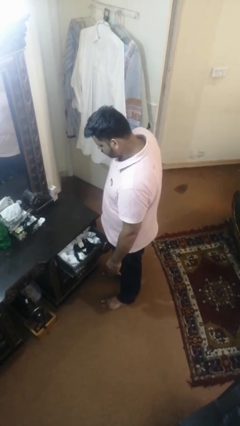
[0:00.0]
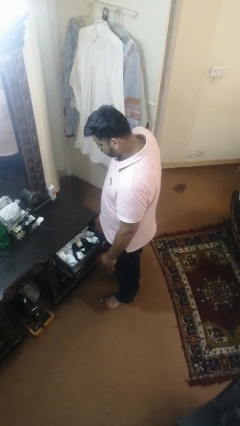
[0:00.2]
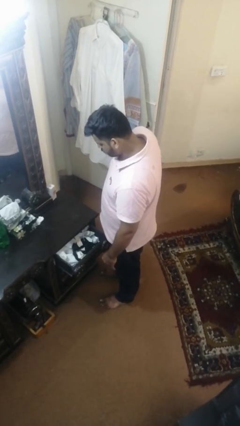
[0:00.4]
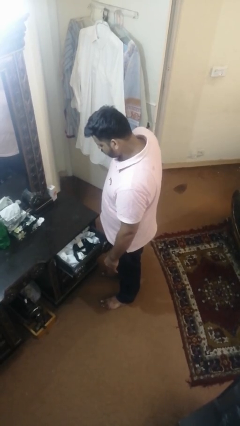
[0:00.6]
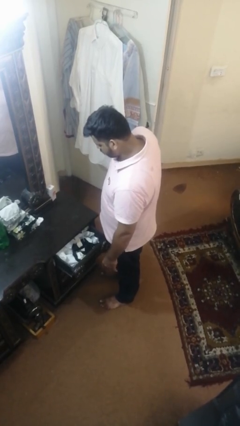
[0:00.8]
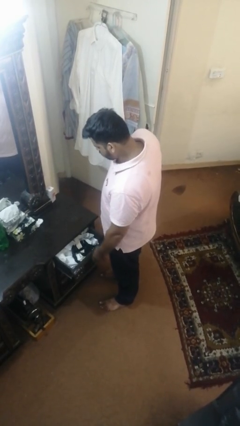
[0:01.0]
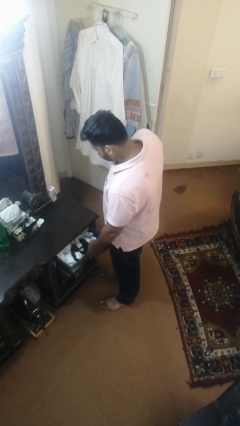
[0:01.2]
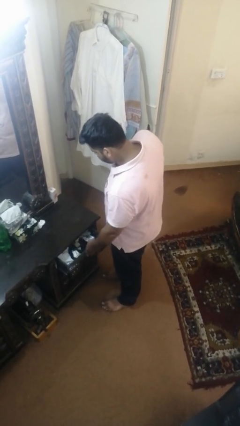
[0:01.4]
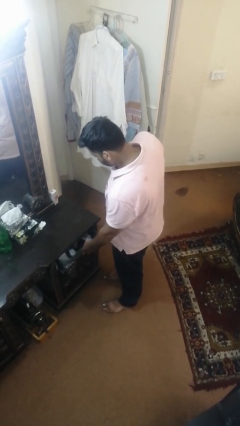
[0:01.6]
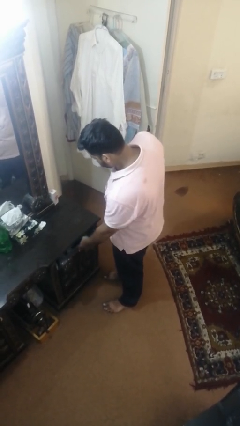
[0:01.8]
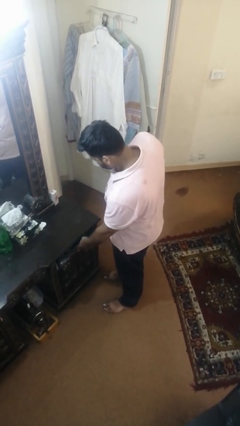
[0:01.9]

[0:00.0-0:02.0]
person closes dresser drawer

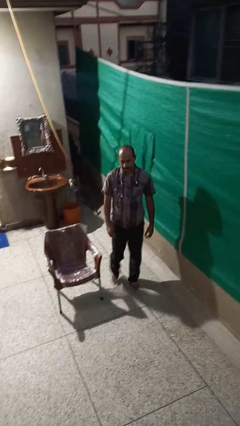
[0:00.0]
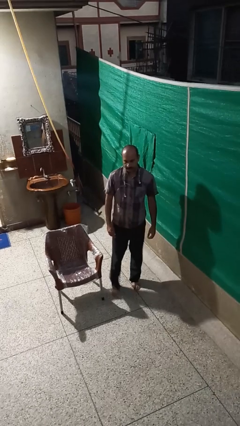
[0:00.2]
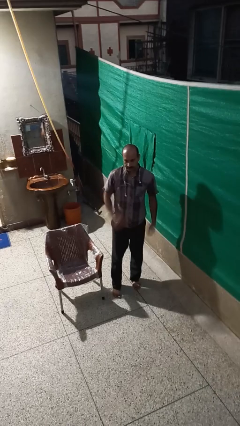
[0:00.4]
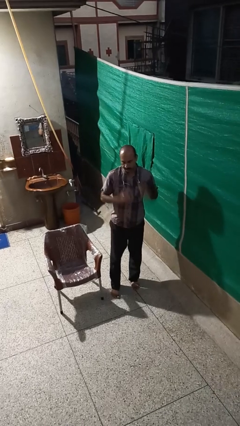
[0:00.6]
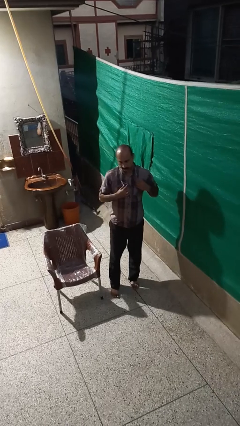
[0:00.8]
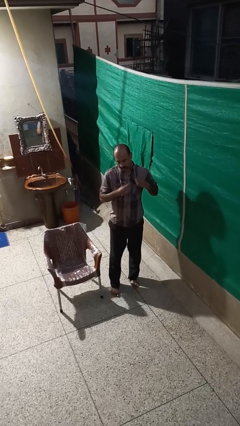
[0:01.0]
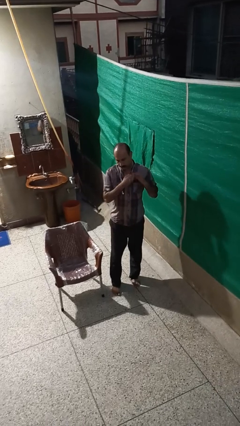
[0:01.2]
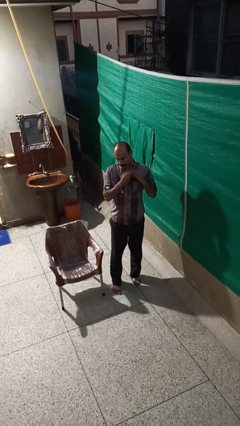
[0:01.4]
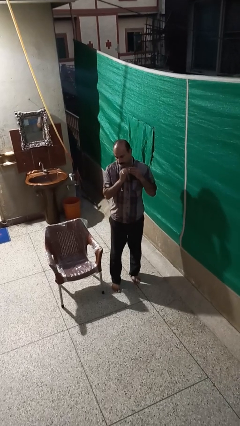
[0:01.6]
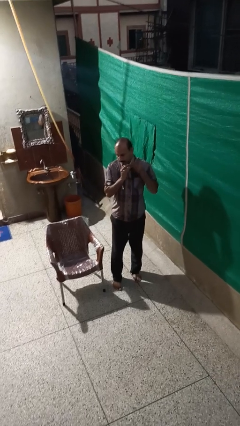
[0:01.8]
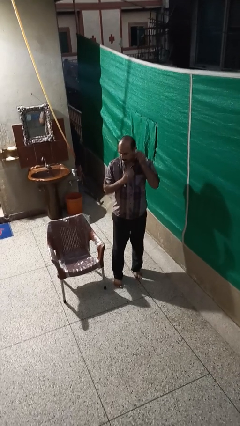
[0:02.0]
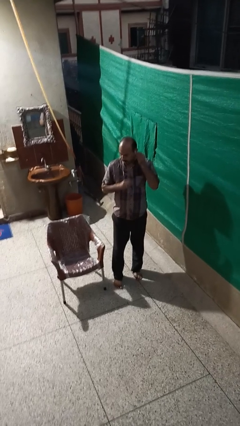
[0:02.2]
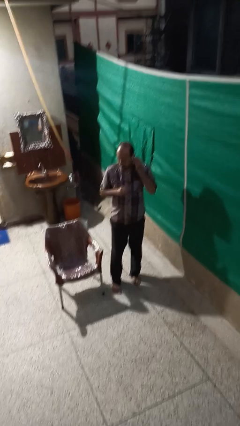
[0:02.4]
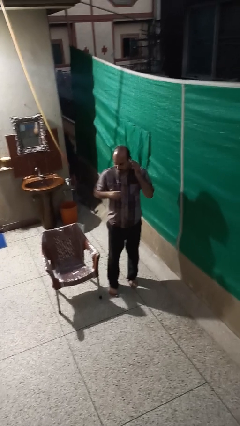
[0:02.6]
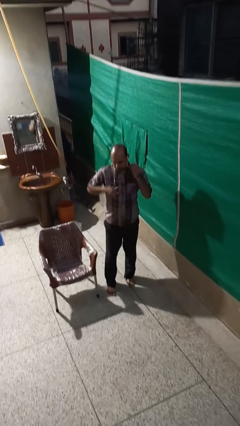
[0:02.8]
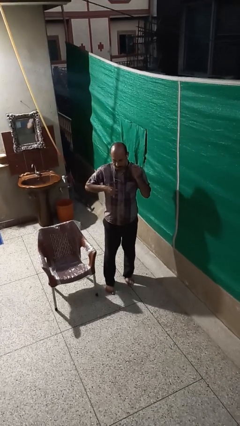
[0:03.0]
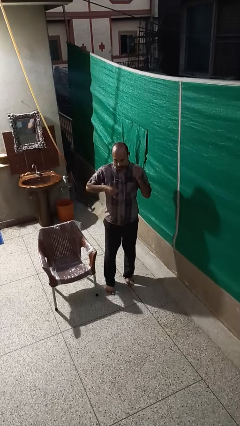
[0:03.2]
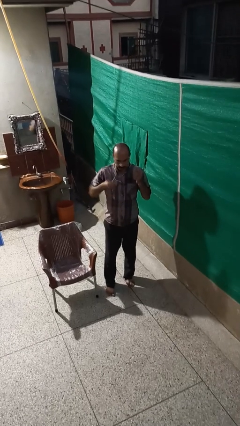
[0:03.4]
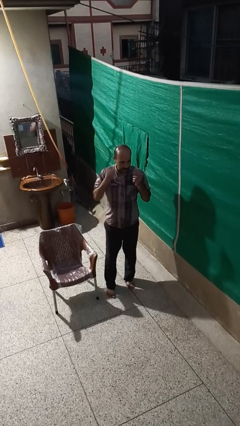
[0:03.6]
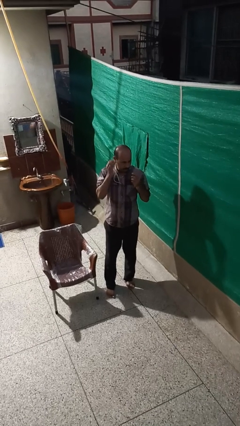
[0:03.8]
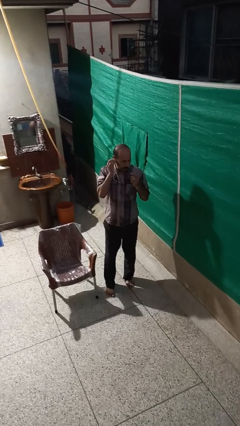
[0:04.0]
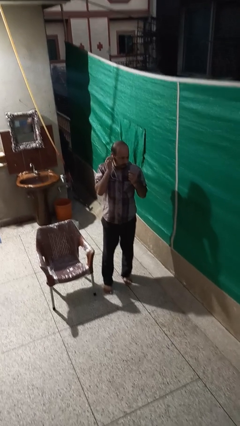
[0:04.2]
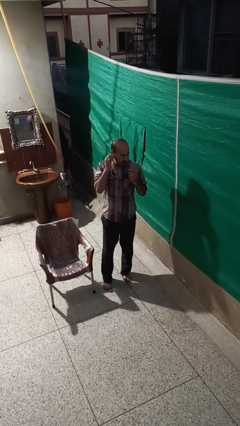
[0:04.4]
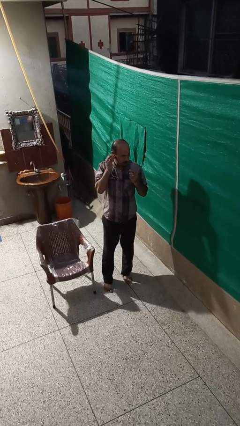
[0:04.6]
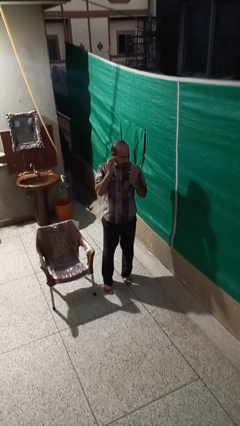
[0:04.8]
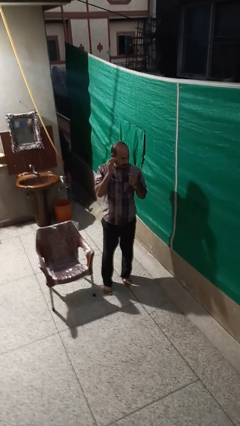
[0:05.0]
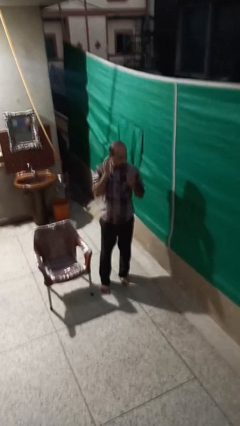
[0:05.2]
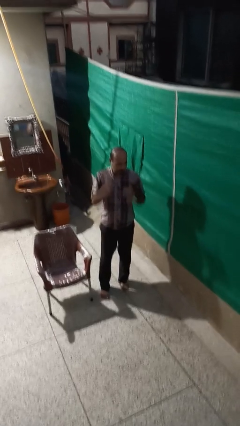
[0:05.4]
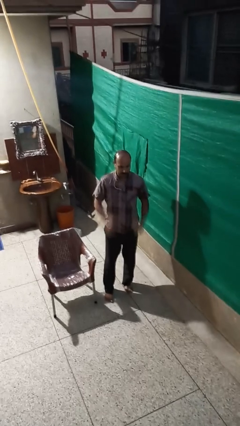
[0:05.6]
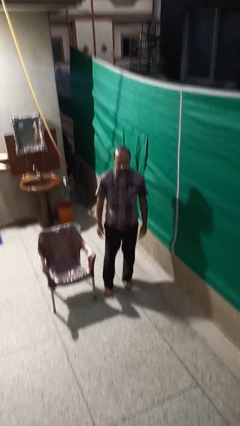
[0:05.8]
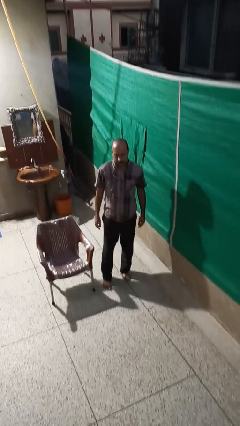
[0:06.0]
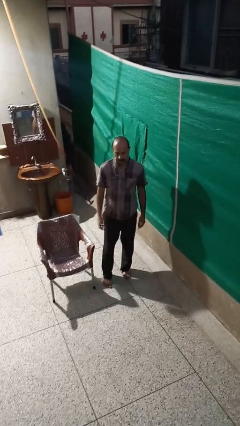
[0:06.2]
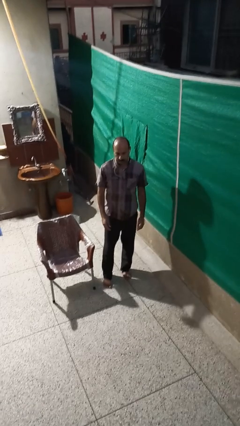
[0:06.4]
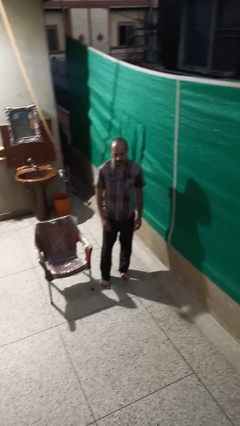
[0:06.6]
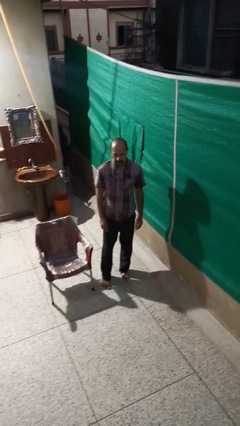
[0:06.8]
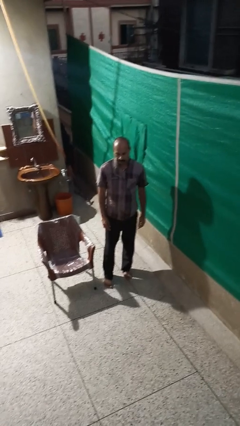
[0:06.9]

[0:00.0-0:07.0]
person puts on headphones

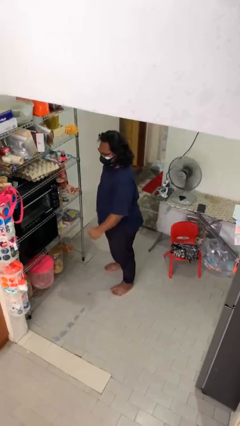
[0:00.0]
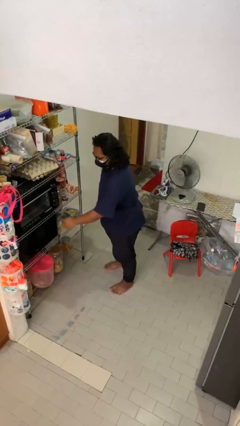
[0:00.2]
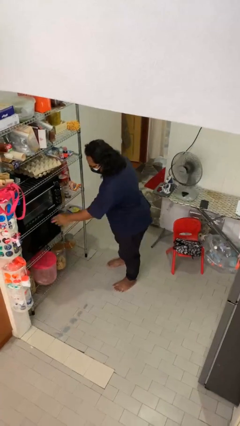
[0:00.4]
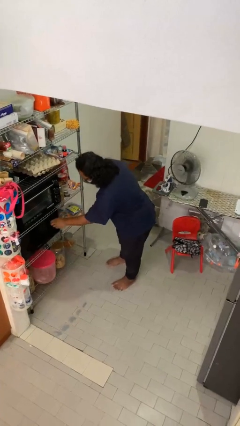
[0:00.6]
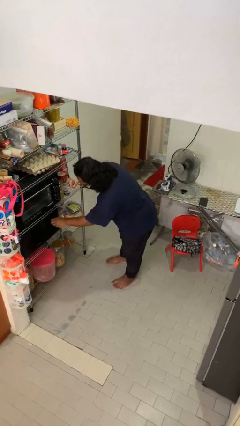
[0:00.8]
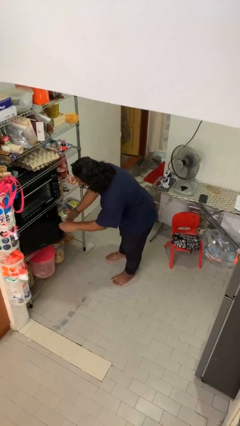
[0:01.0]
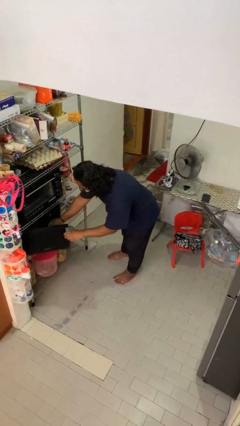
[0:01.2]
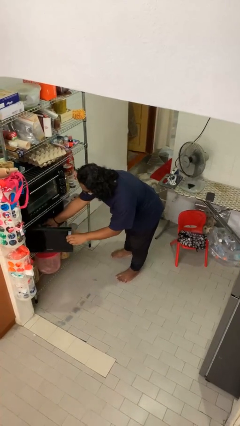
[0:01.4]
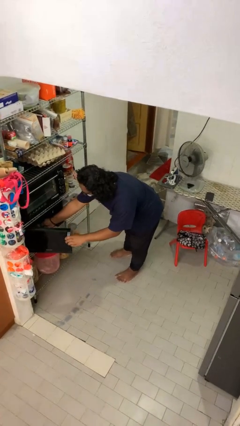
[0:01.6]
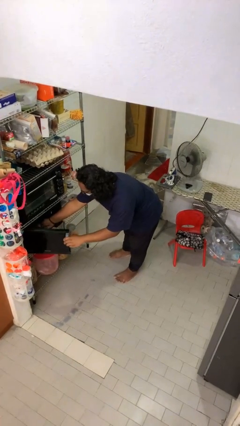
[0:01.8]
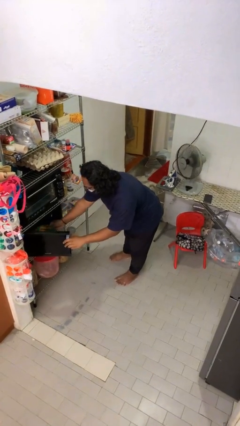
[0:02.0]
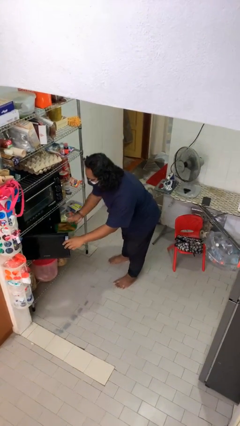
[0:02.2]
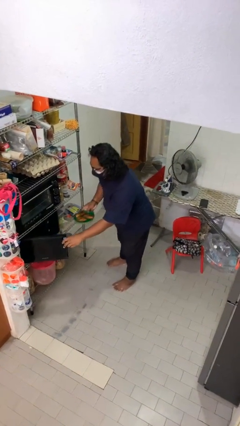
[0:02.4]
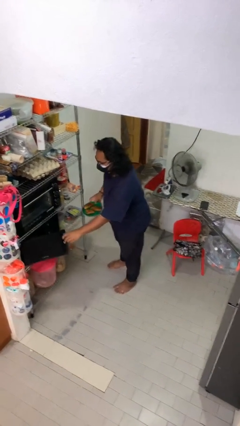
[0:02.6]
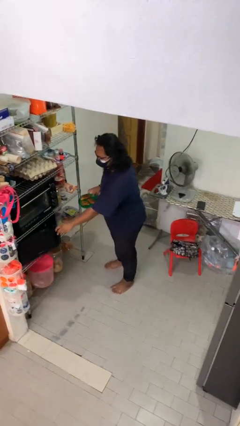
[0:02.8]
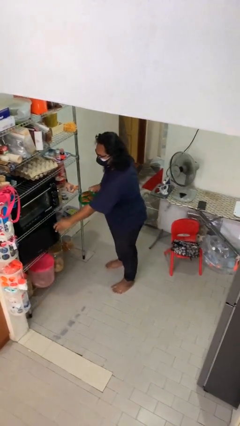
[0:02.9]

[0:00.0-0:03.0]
person takes object from microwave

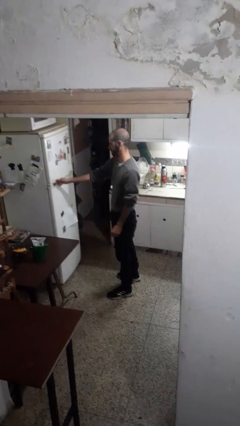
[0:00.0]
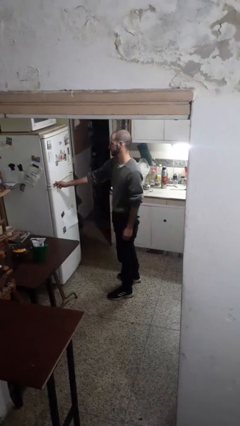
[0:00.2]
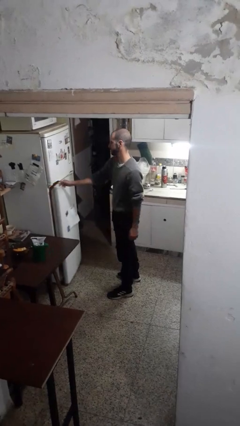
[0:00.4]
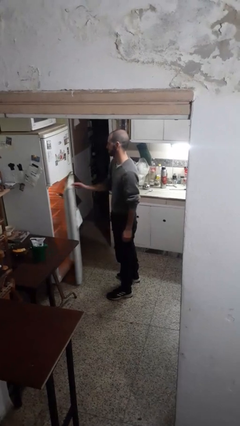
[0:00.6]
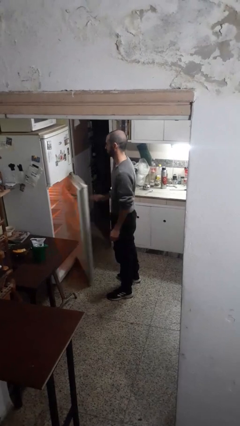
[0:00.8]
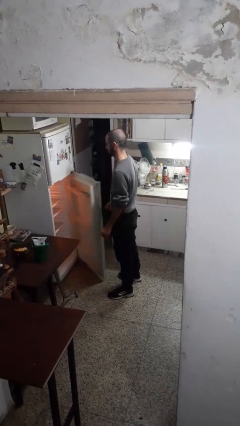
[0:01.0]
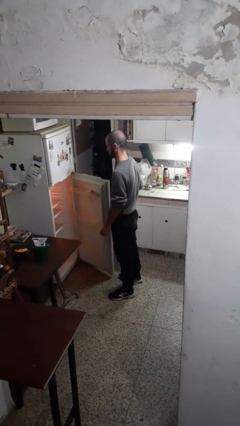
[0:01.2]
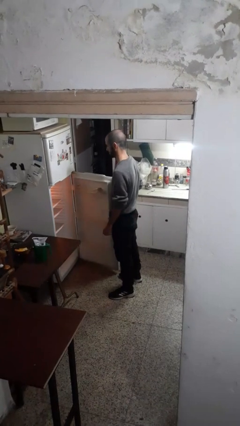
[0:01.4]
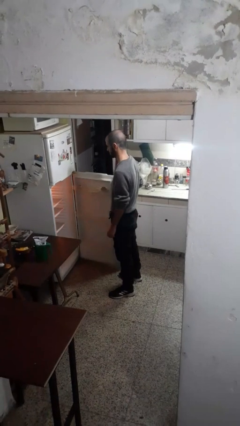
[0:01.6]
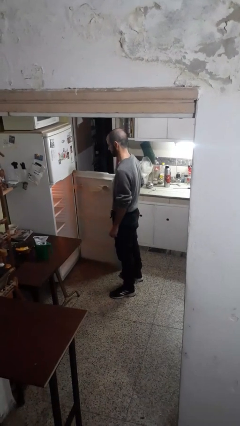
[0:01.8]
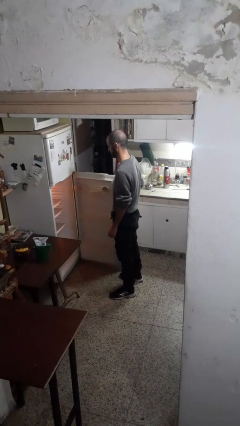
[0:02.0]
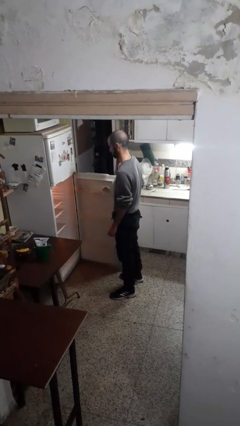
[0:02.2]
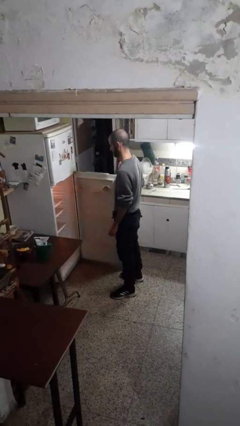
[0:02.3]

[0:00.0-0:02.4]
person opens refrigerator

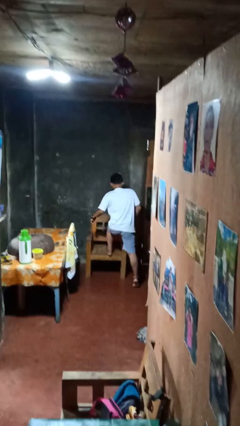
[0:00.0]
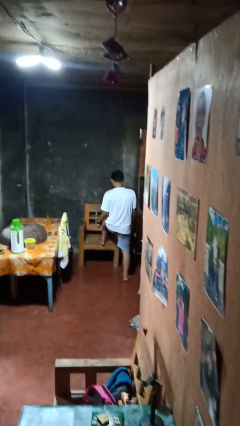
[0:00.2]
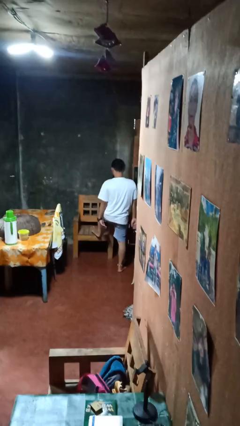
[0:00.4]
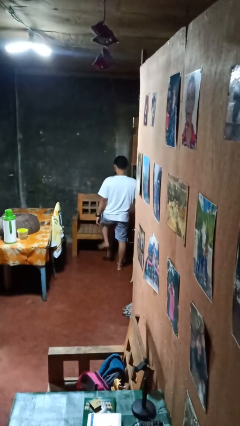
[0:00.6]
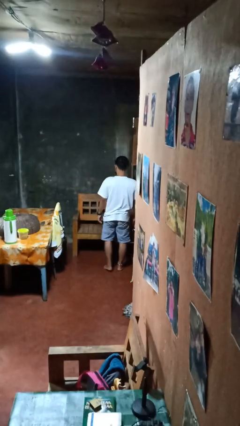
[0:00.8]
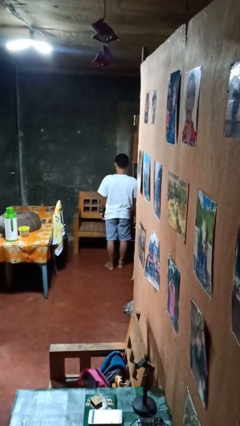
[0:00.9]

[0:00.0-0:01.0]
person climbs off chair

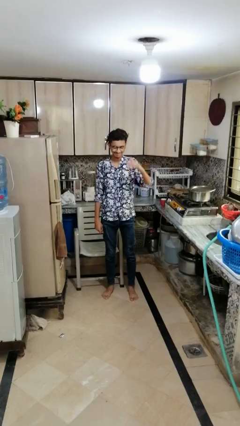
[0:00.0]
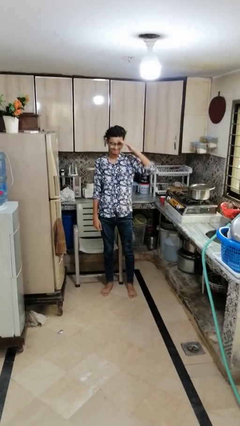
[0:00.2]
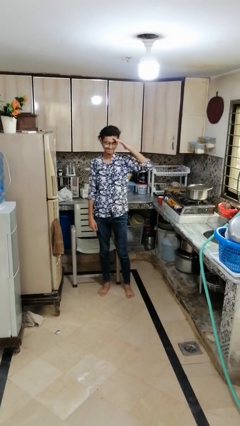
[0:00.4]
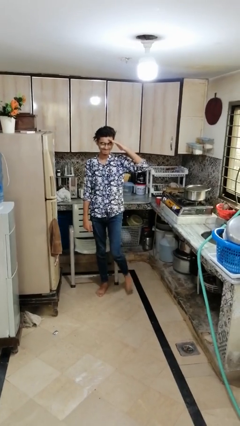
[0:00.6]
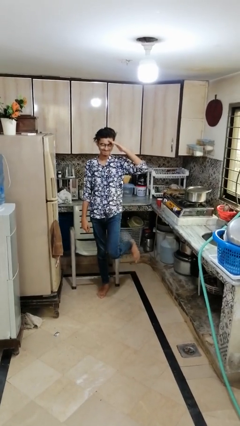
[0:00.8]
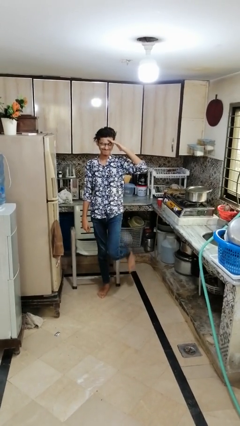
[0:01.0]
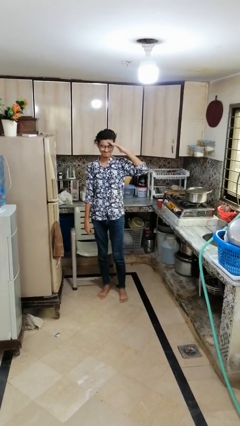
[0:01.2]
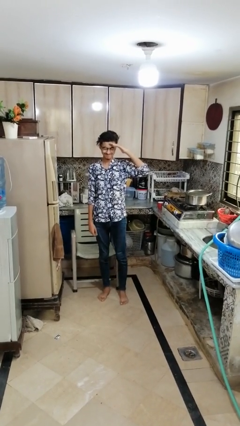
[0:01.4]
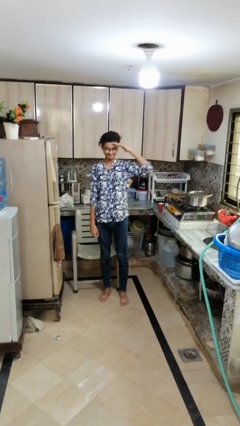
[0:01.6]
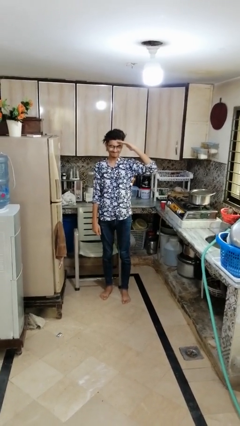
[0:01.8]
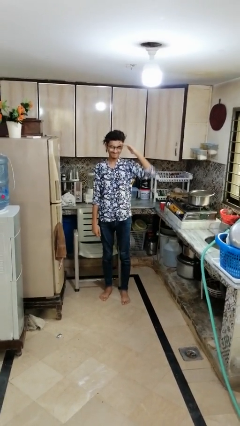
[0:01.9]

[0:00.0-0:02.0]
person salutes
